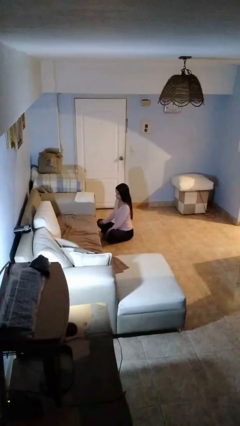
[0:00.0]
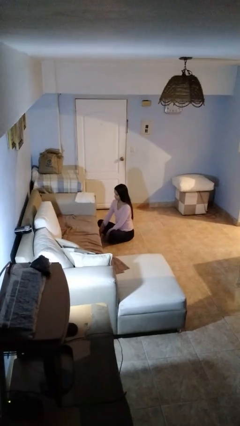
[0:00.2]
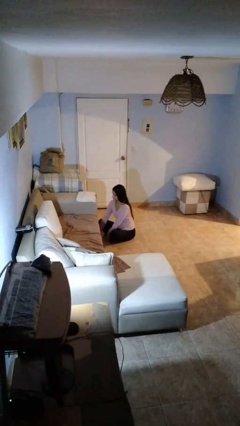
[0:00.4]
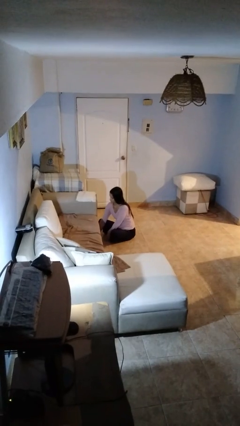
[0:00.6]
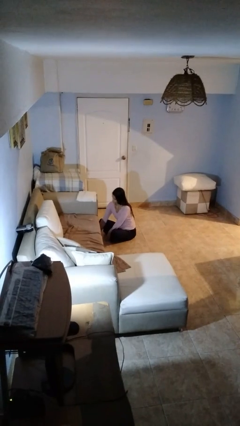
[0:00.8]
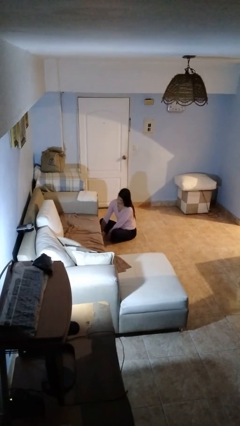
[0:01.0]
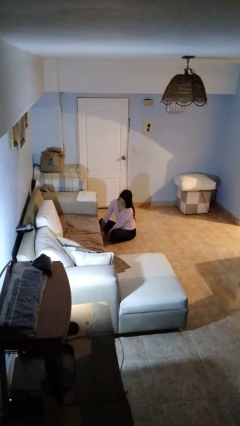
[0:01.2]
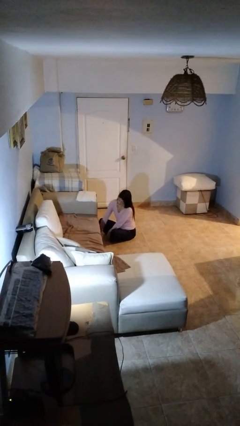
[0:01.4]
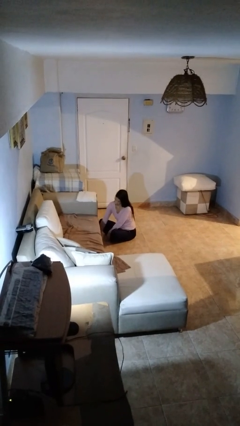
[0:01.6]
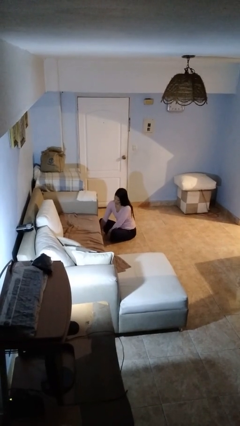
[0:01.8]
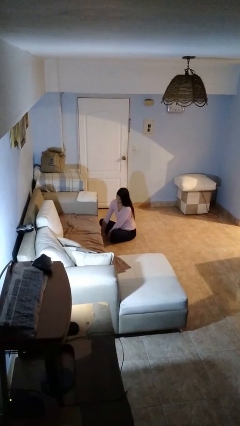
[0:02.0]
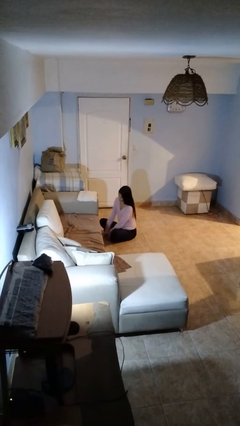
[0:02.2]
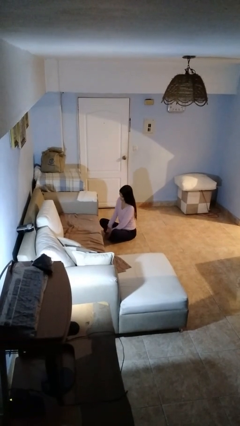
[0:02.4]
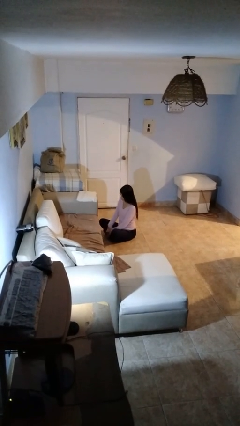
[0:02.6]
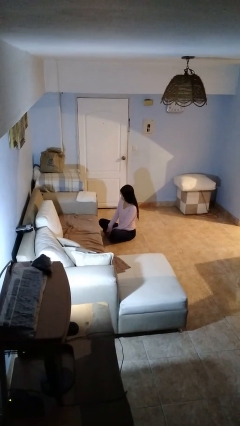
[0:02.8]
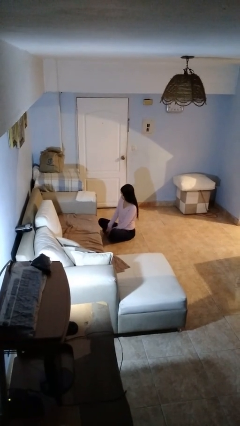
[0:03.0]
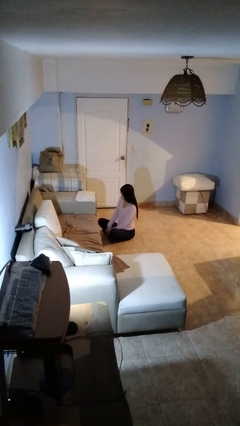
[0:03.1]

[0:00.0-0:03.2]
person searches under couch

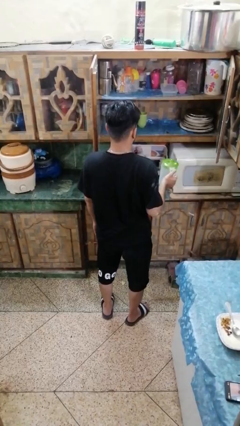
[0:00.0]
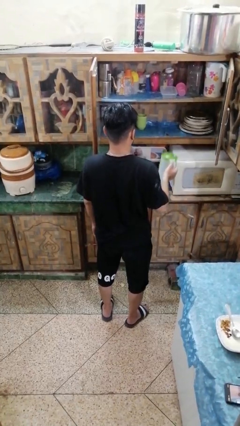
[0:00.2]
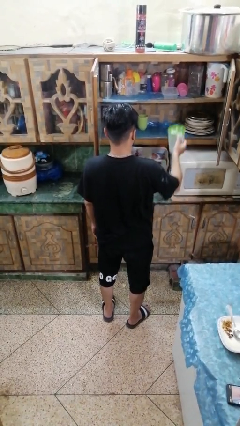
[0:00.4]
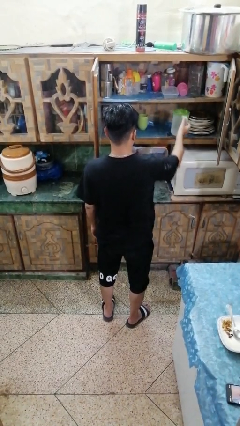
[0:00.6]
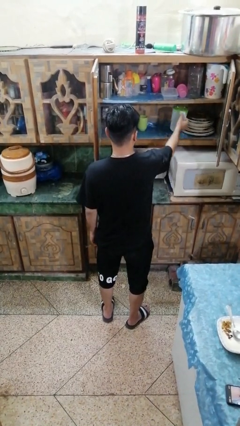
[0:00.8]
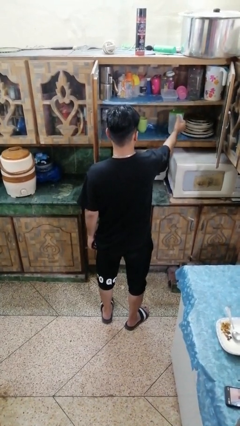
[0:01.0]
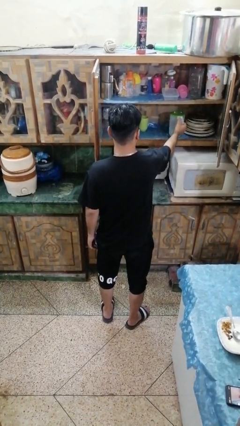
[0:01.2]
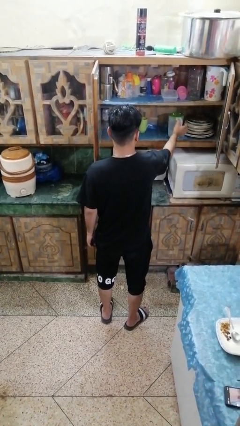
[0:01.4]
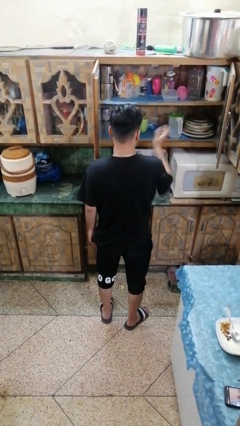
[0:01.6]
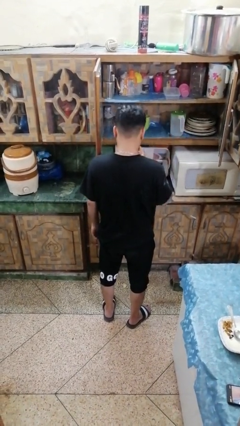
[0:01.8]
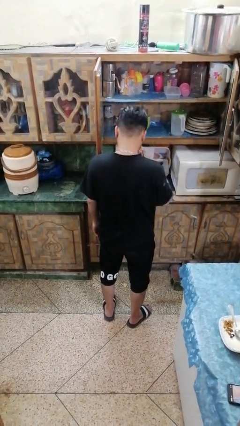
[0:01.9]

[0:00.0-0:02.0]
person puts down object into cabinet

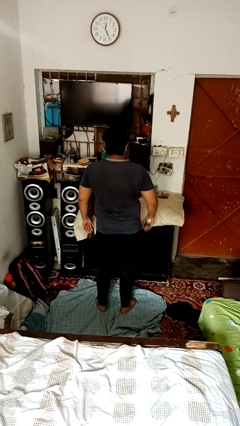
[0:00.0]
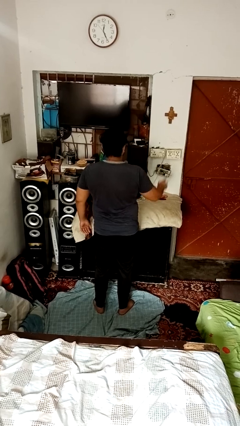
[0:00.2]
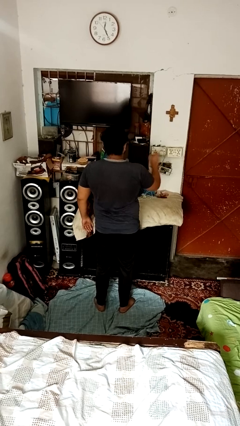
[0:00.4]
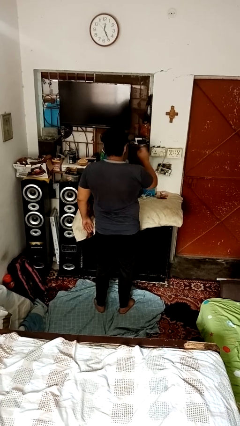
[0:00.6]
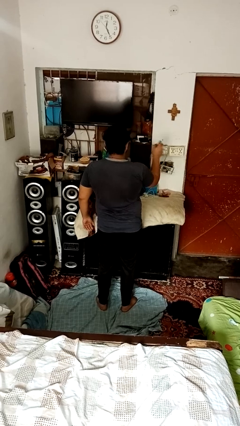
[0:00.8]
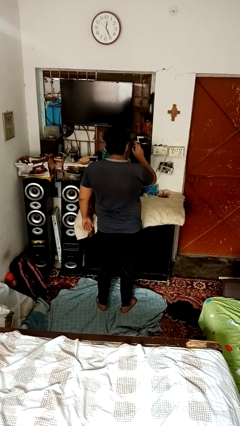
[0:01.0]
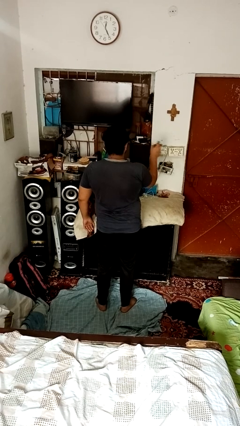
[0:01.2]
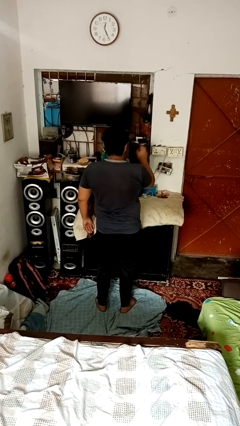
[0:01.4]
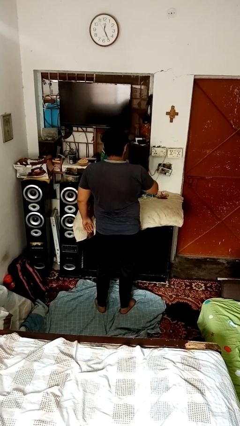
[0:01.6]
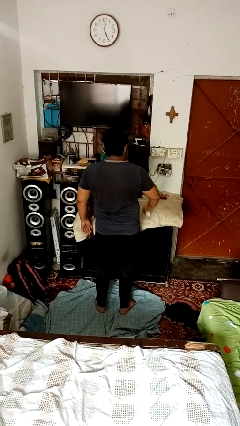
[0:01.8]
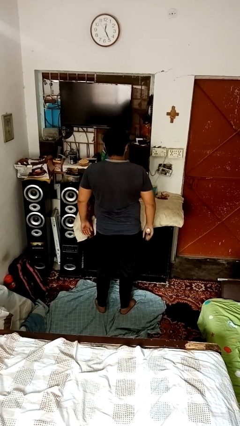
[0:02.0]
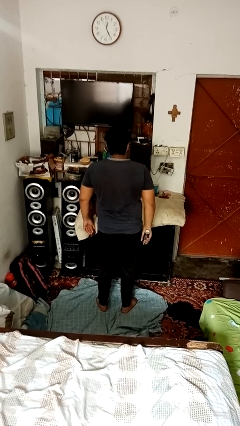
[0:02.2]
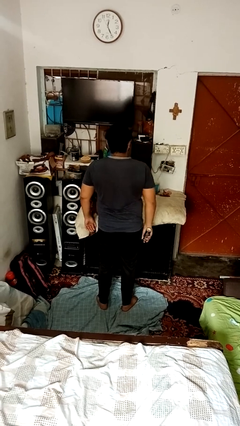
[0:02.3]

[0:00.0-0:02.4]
person sprays from bottle

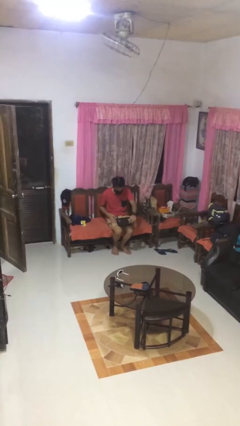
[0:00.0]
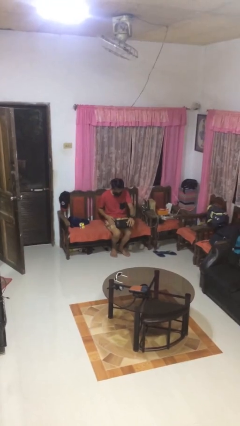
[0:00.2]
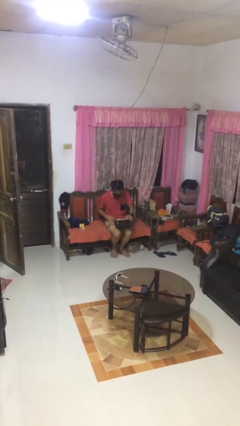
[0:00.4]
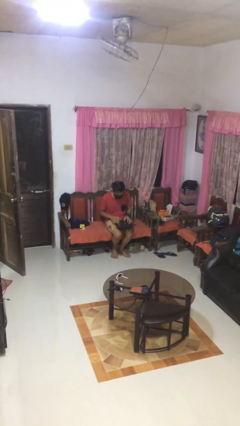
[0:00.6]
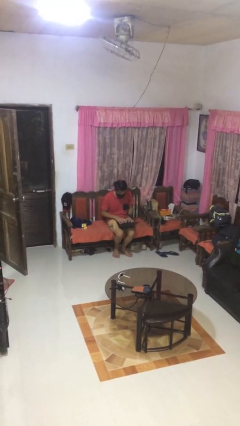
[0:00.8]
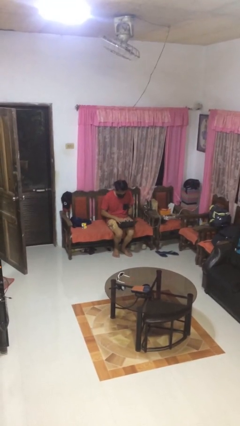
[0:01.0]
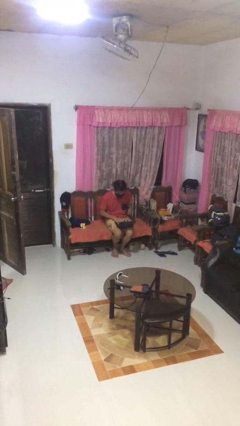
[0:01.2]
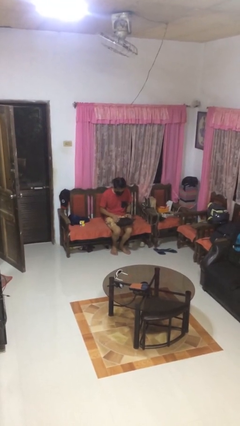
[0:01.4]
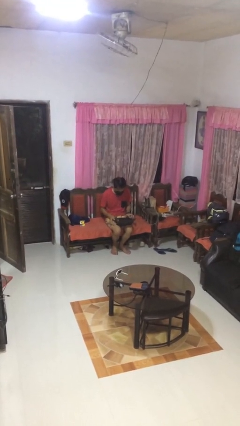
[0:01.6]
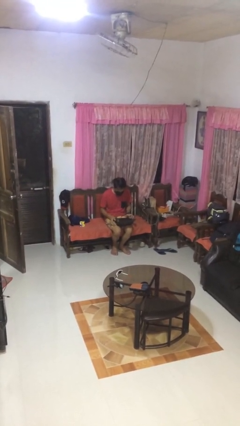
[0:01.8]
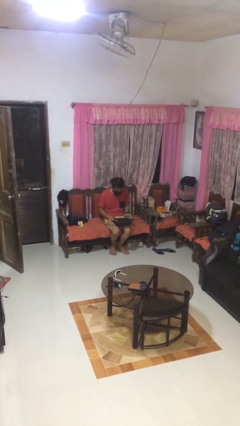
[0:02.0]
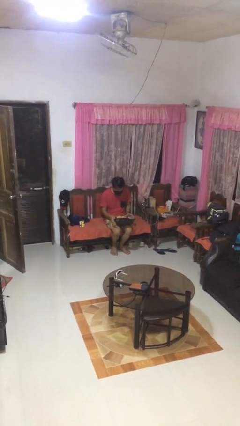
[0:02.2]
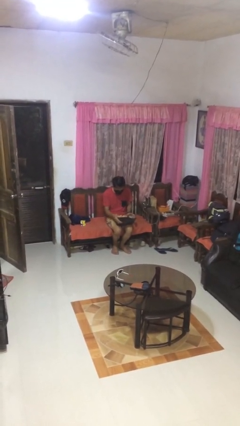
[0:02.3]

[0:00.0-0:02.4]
person opens laptop

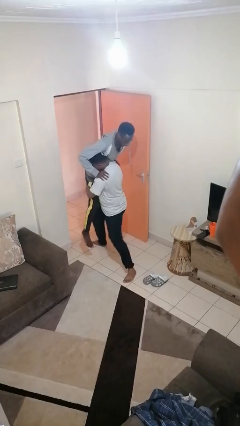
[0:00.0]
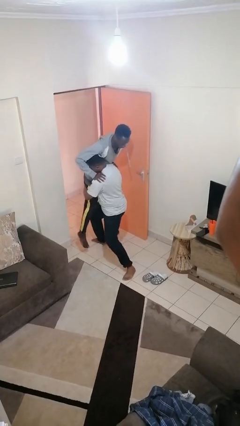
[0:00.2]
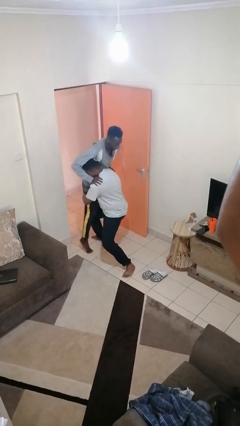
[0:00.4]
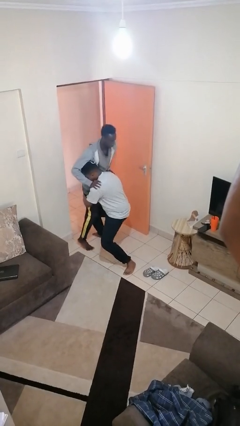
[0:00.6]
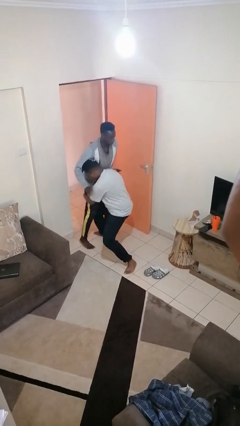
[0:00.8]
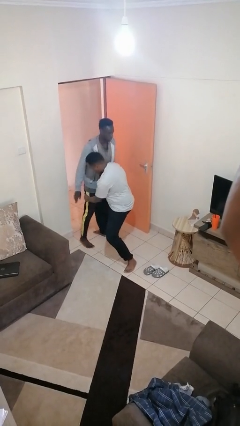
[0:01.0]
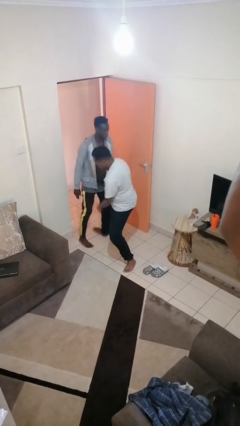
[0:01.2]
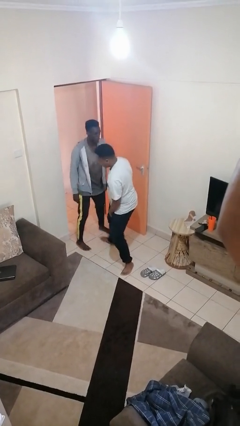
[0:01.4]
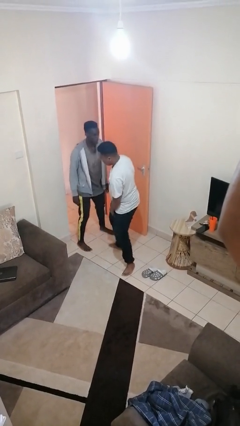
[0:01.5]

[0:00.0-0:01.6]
person puts down person

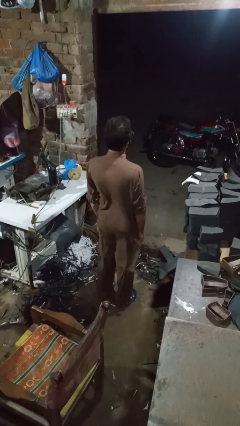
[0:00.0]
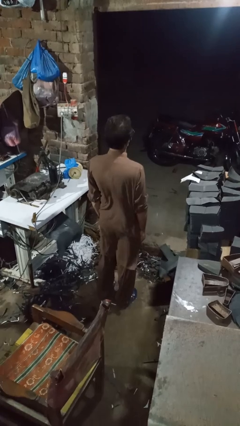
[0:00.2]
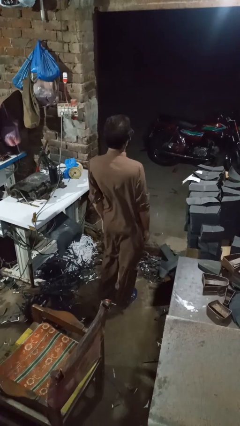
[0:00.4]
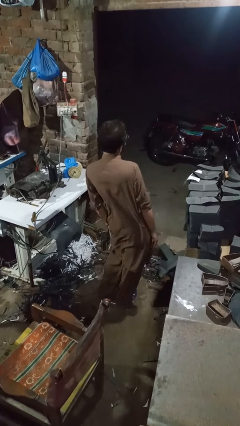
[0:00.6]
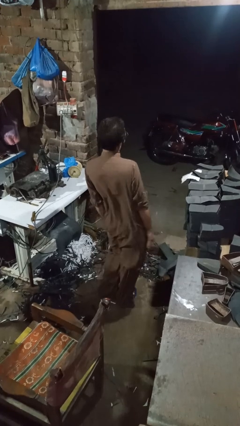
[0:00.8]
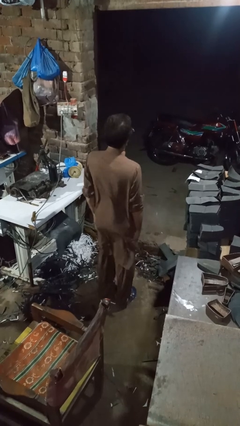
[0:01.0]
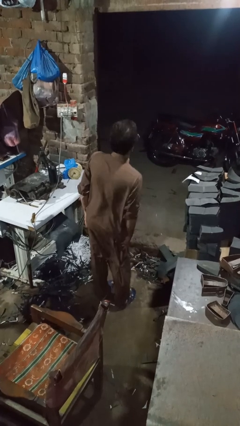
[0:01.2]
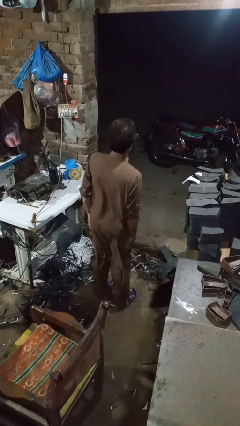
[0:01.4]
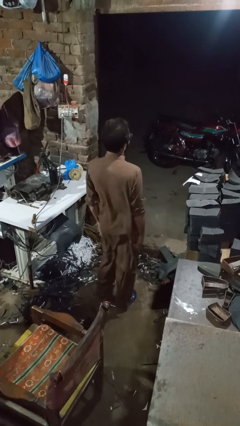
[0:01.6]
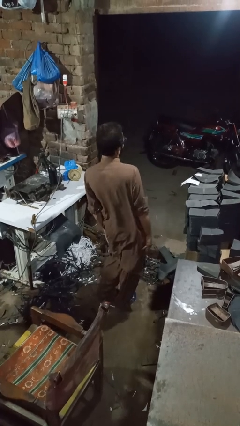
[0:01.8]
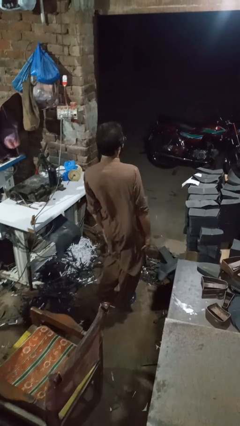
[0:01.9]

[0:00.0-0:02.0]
person wiggles hips

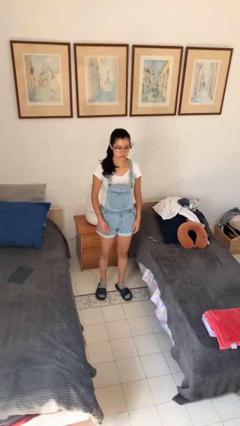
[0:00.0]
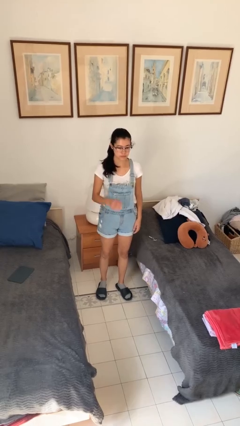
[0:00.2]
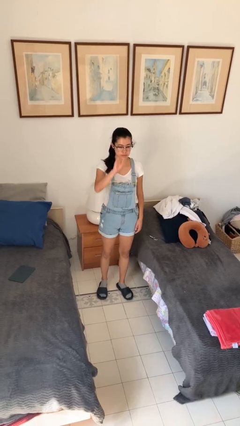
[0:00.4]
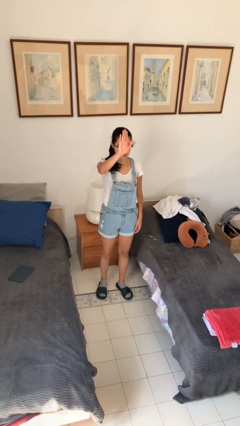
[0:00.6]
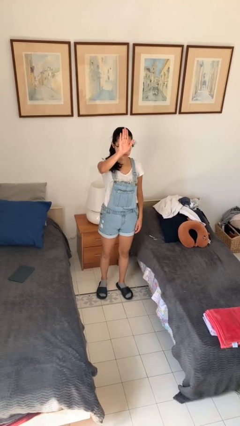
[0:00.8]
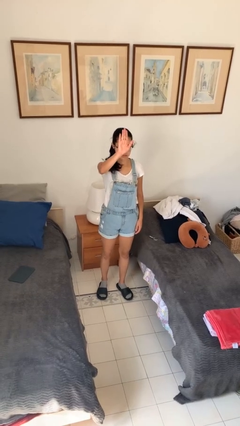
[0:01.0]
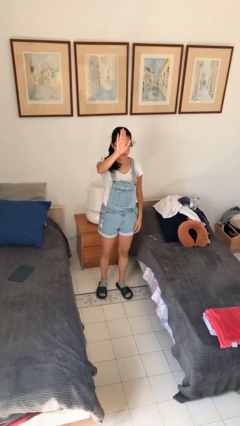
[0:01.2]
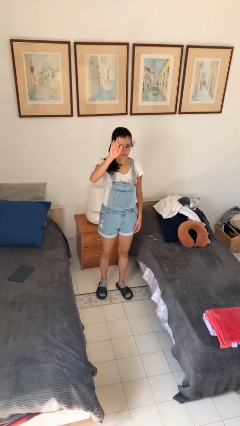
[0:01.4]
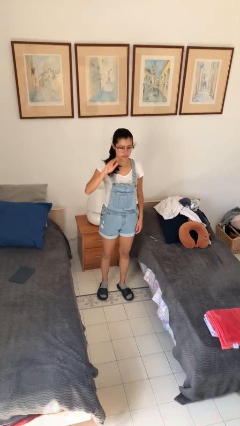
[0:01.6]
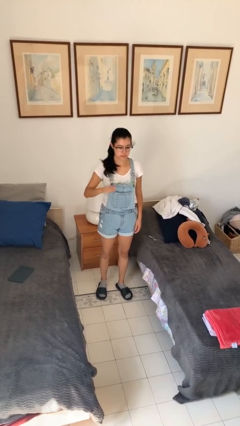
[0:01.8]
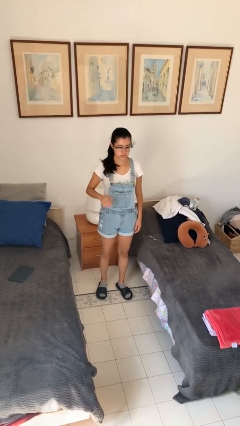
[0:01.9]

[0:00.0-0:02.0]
person gestures stop

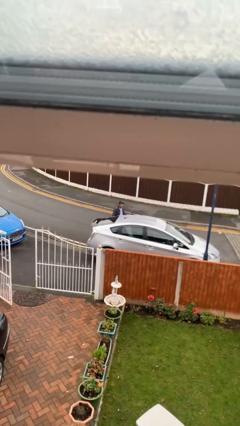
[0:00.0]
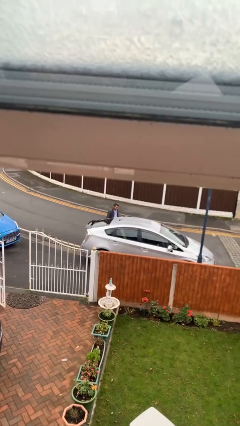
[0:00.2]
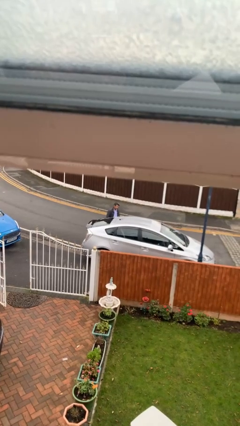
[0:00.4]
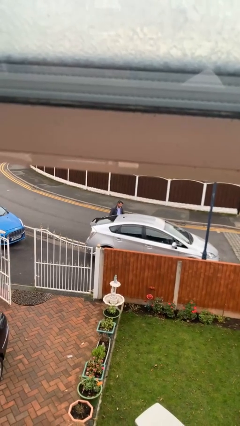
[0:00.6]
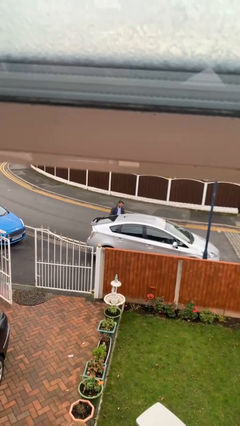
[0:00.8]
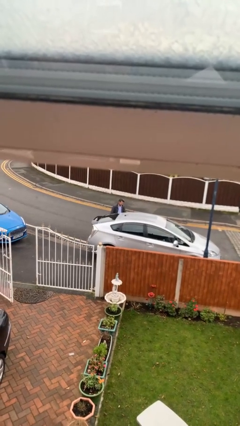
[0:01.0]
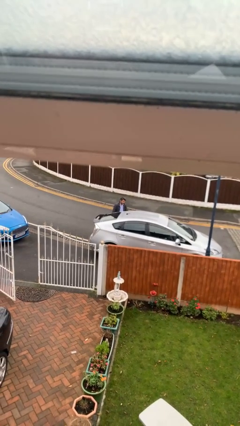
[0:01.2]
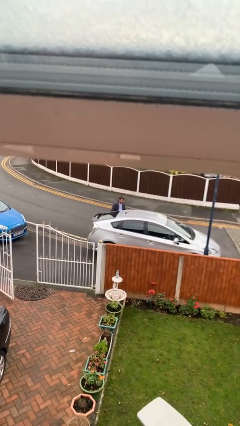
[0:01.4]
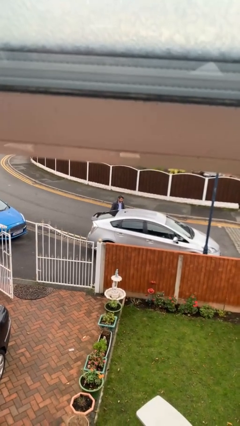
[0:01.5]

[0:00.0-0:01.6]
person closes car door
